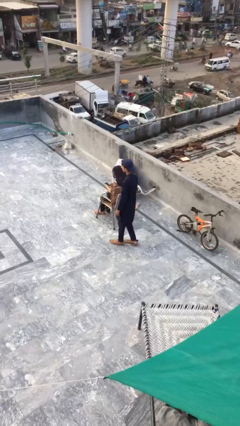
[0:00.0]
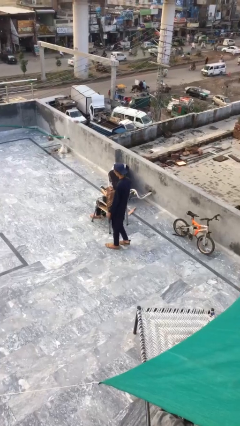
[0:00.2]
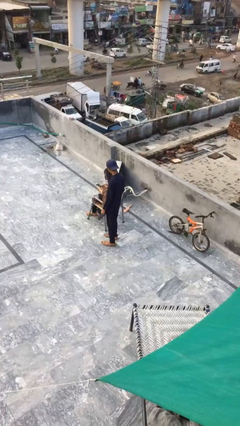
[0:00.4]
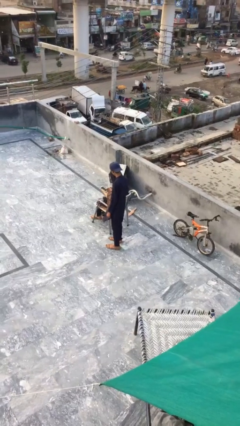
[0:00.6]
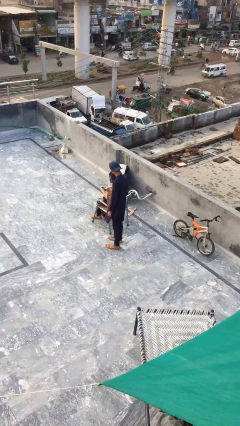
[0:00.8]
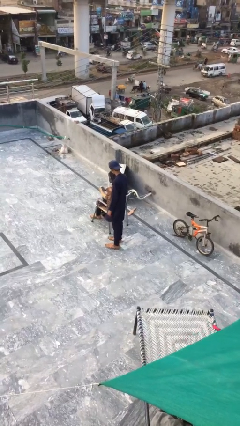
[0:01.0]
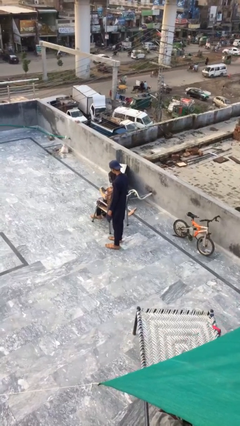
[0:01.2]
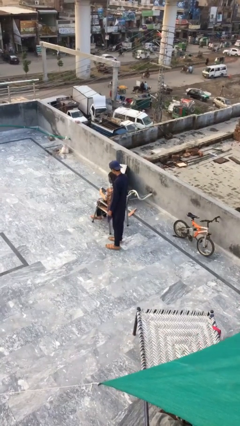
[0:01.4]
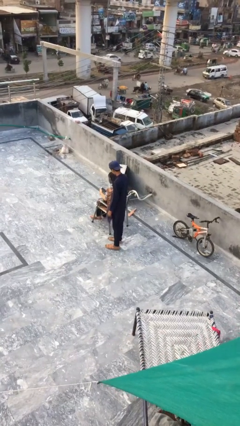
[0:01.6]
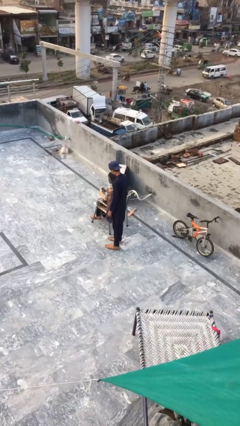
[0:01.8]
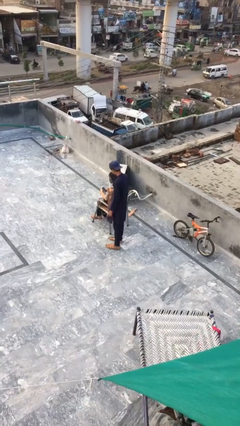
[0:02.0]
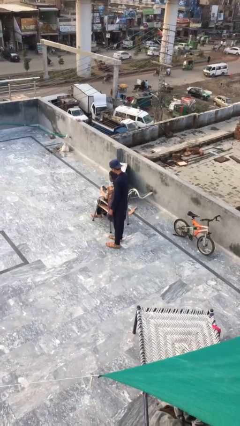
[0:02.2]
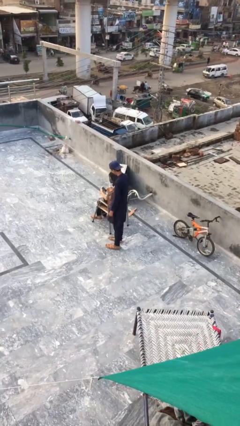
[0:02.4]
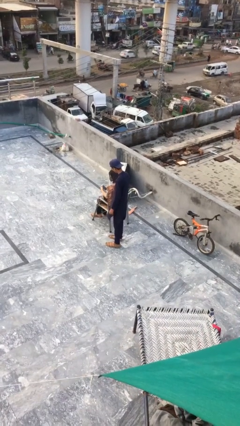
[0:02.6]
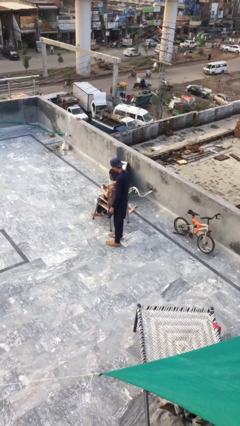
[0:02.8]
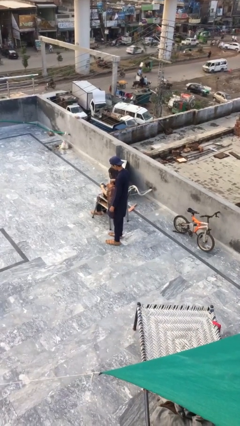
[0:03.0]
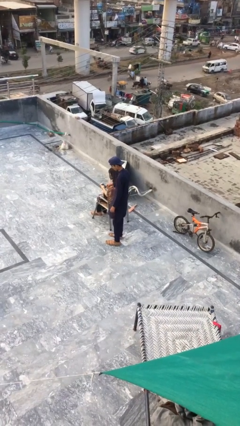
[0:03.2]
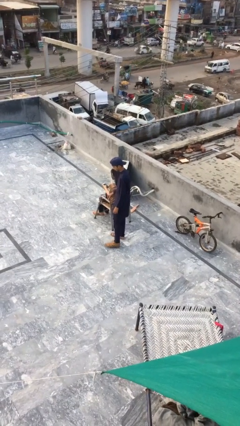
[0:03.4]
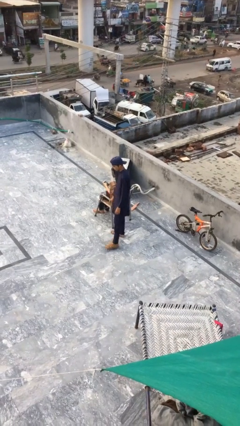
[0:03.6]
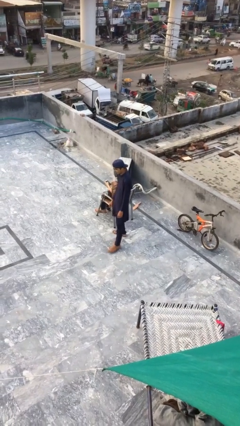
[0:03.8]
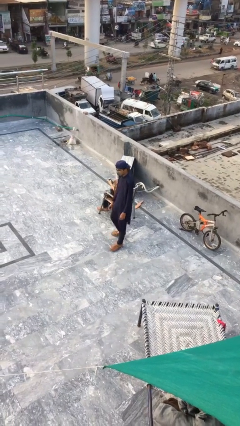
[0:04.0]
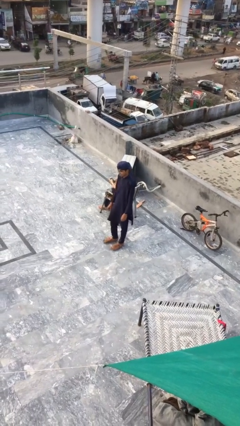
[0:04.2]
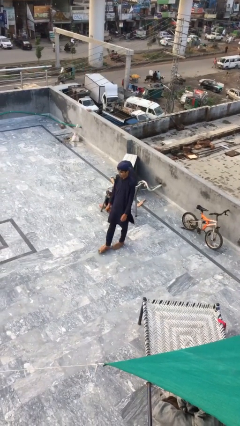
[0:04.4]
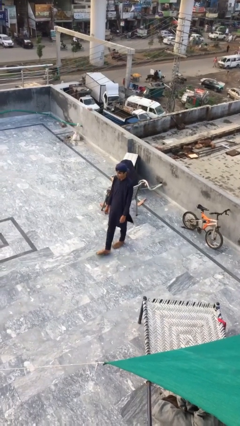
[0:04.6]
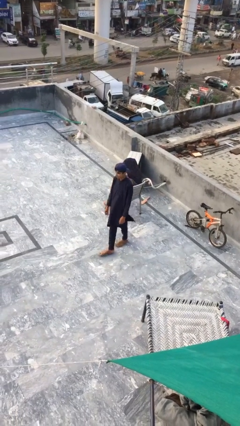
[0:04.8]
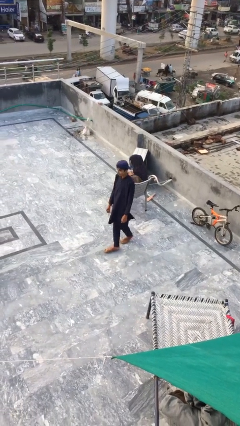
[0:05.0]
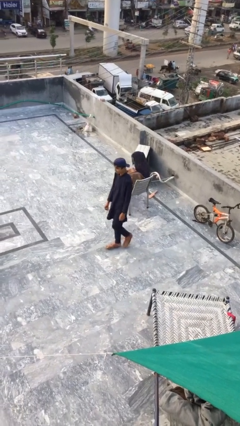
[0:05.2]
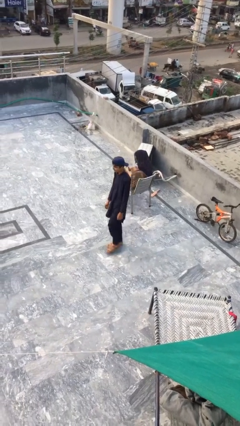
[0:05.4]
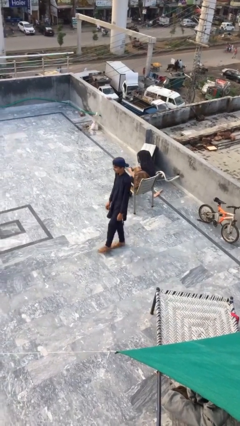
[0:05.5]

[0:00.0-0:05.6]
person steals object from person

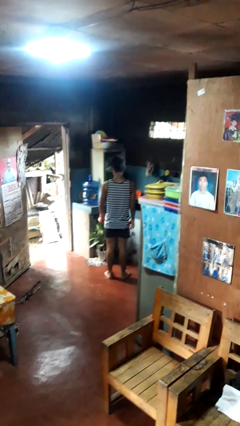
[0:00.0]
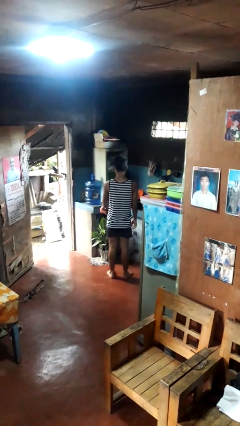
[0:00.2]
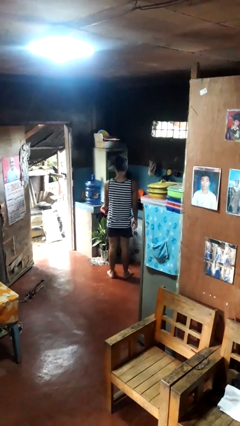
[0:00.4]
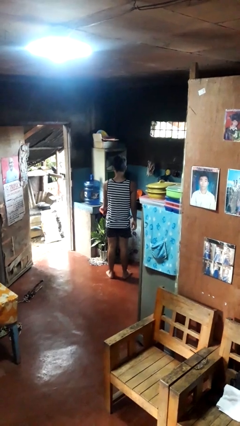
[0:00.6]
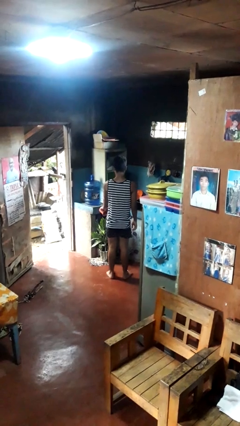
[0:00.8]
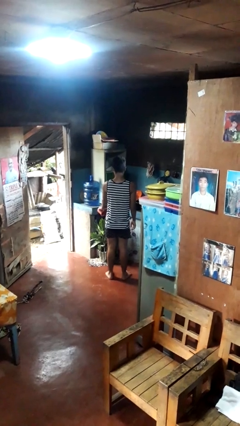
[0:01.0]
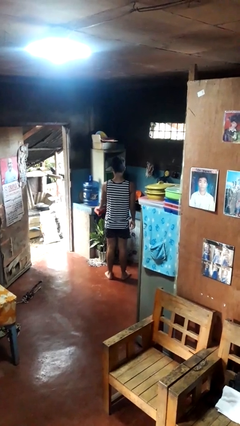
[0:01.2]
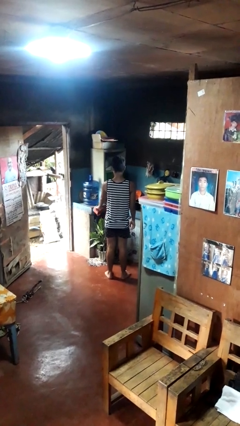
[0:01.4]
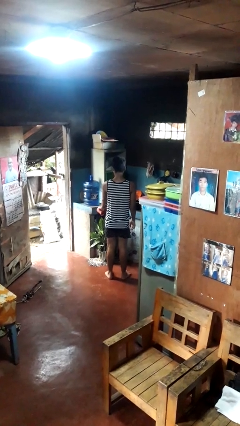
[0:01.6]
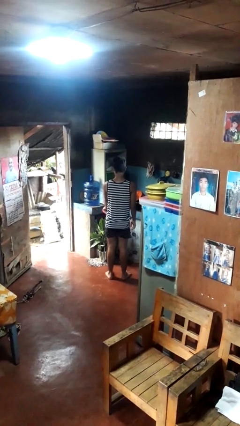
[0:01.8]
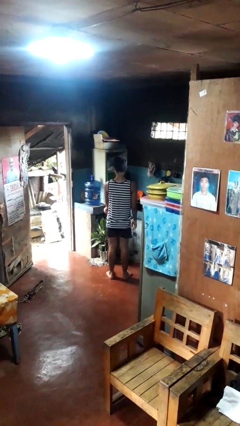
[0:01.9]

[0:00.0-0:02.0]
person waters houseplant

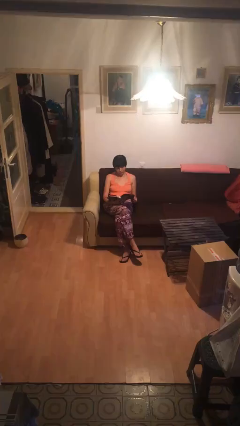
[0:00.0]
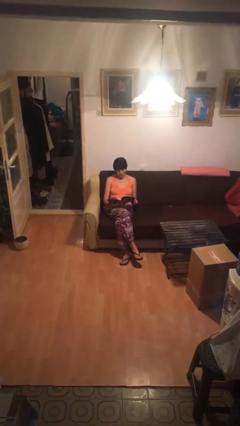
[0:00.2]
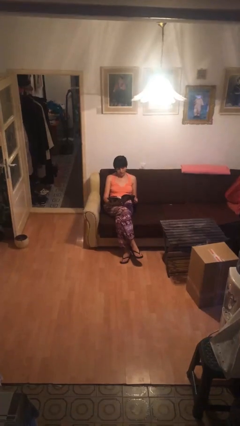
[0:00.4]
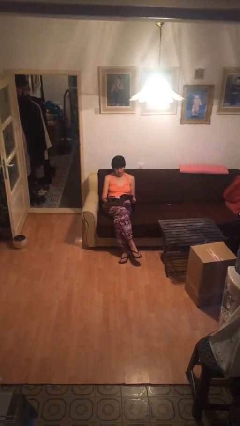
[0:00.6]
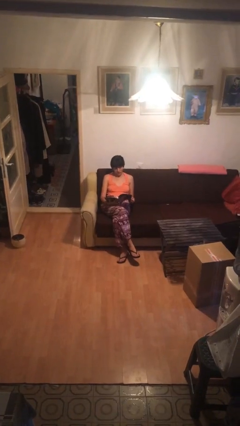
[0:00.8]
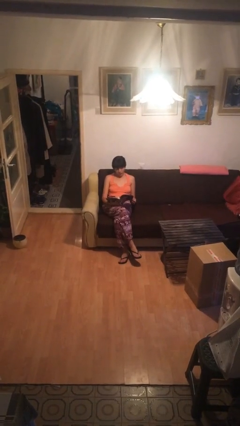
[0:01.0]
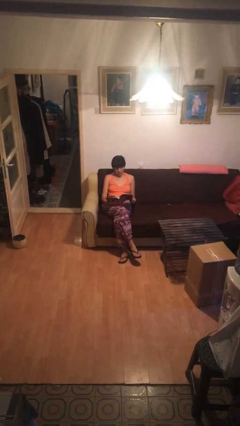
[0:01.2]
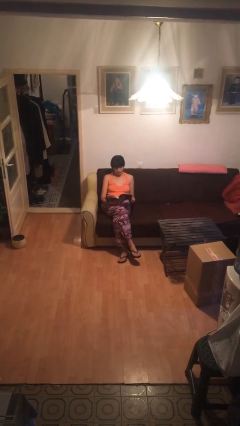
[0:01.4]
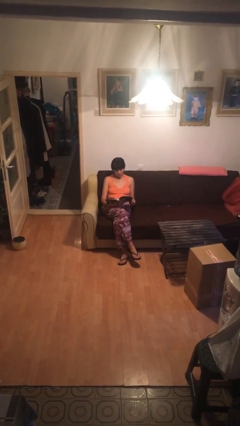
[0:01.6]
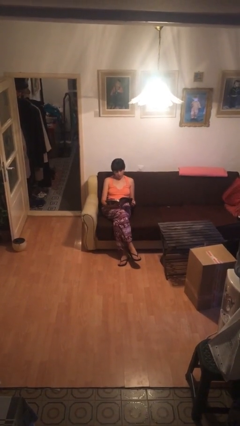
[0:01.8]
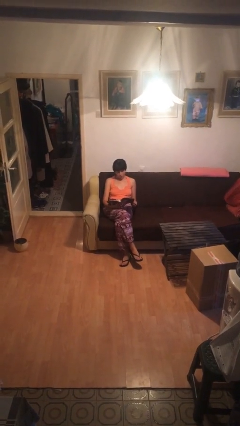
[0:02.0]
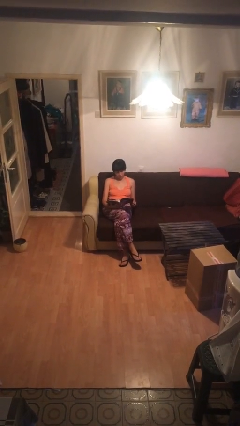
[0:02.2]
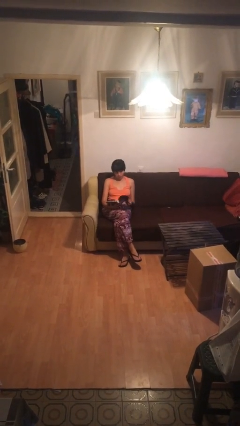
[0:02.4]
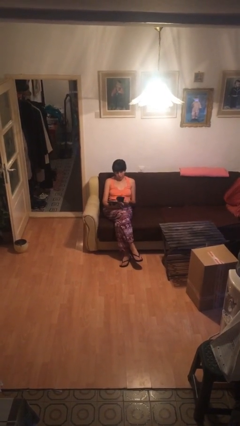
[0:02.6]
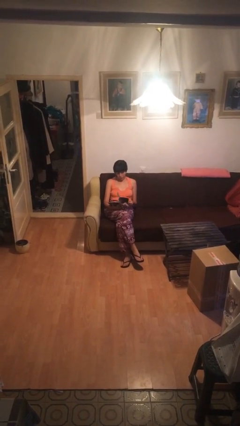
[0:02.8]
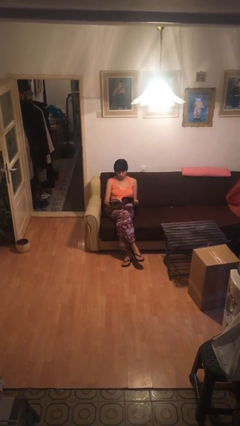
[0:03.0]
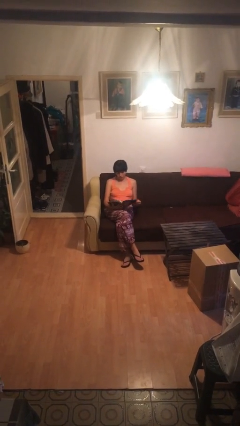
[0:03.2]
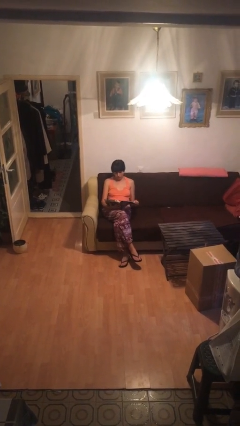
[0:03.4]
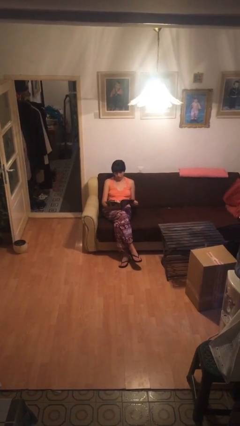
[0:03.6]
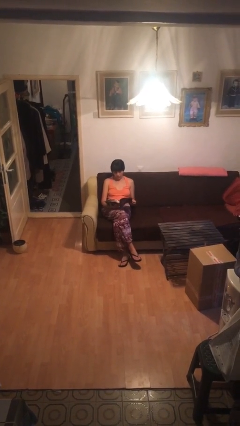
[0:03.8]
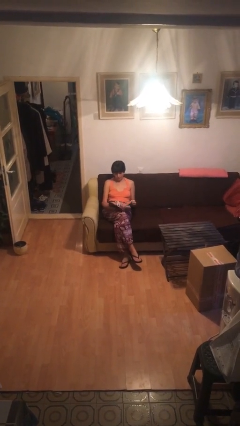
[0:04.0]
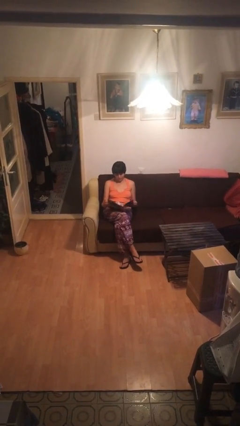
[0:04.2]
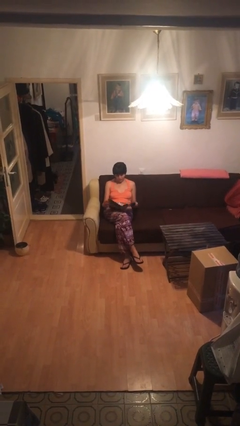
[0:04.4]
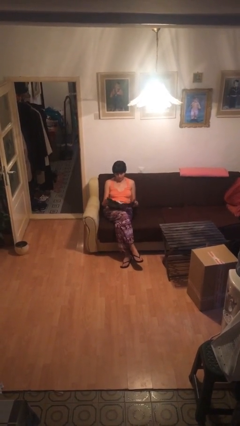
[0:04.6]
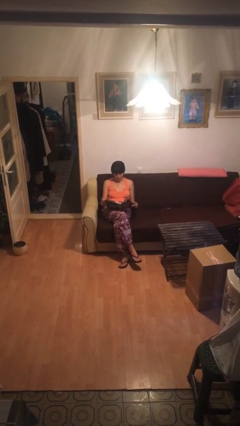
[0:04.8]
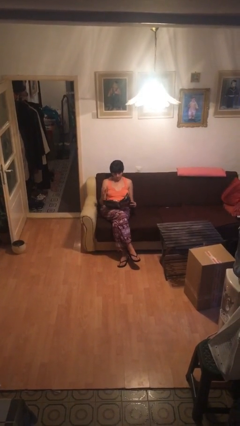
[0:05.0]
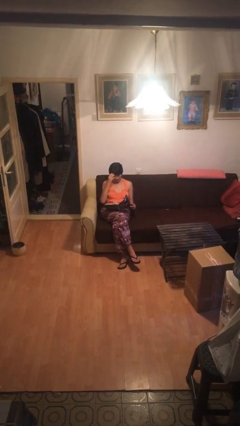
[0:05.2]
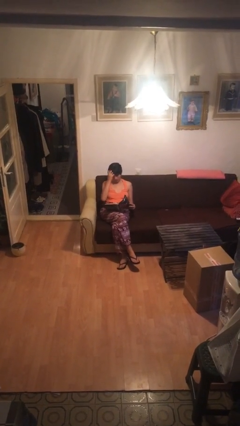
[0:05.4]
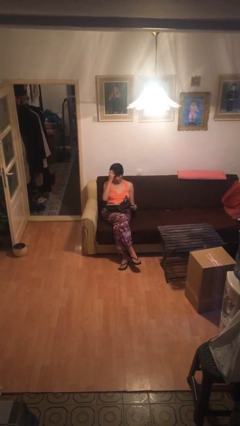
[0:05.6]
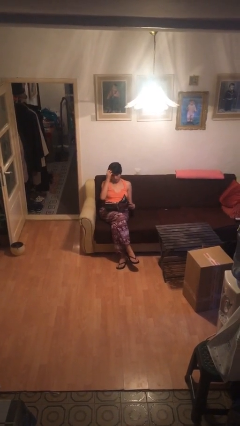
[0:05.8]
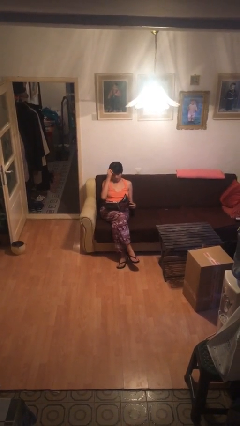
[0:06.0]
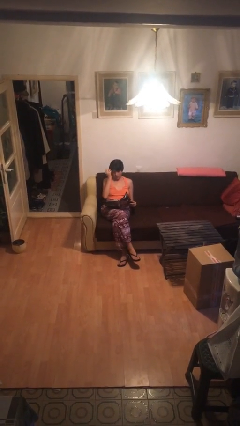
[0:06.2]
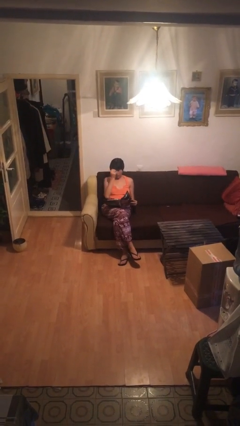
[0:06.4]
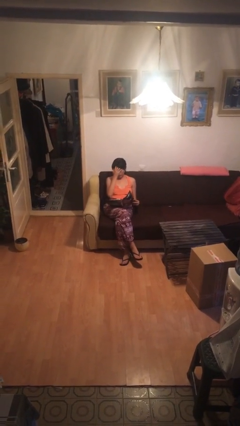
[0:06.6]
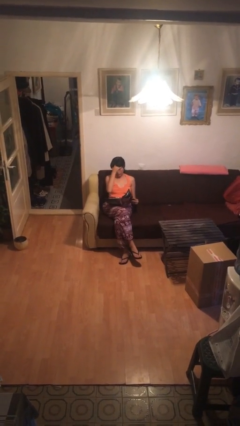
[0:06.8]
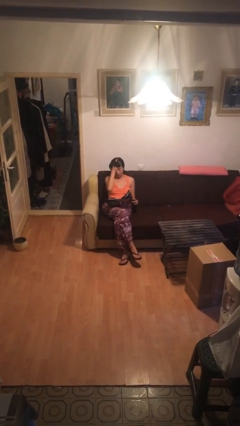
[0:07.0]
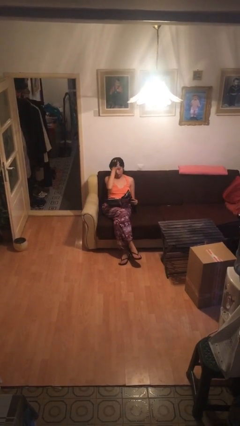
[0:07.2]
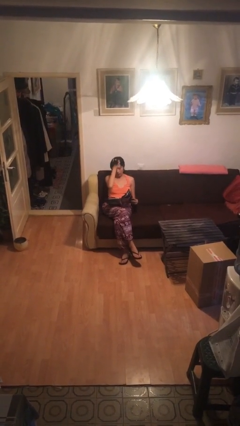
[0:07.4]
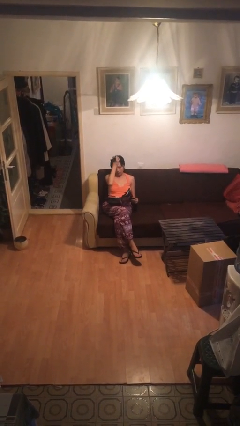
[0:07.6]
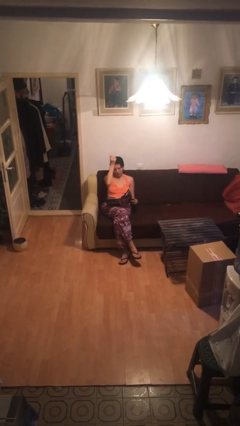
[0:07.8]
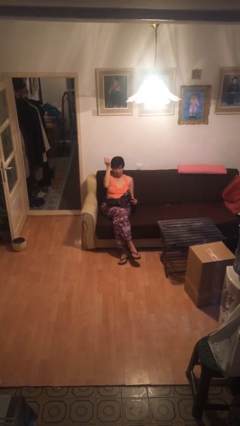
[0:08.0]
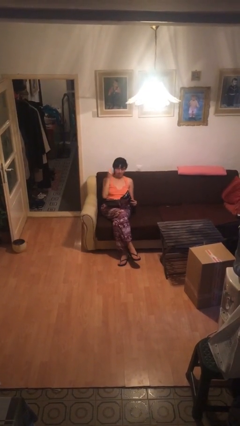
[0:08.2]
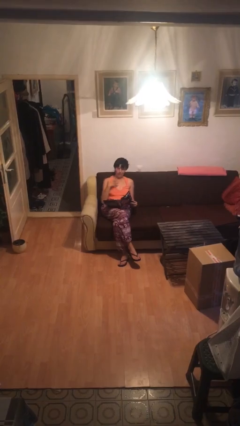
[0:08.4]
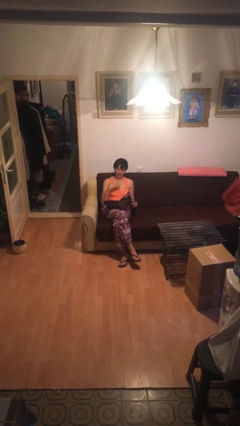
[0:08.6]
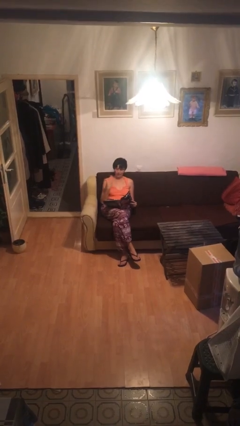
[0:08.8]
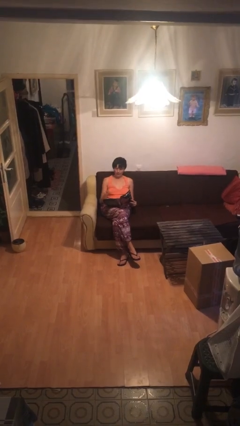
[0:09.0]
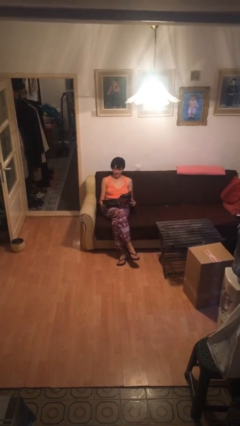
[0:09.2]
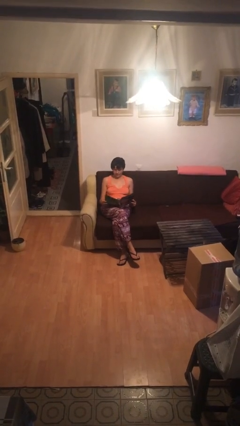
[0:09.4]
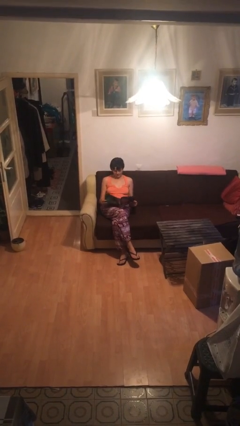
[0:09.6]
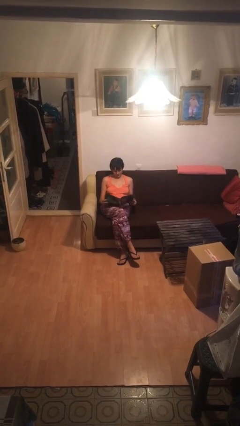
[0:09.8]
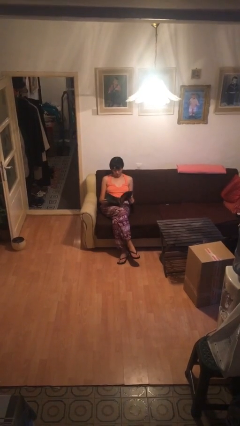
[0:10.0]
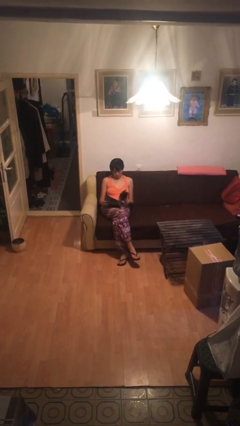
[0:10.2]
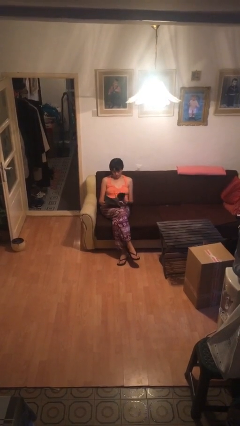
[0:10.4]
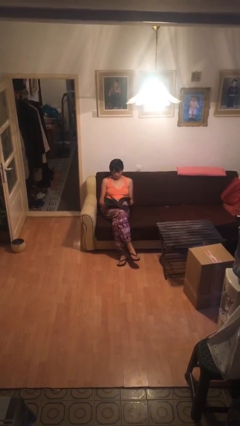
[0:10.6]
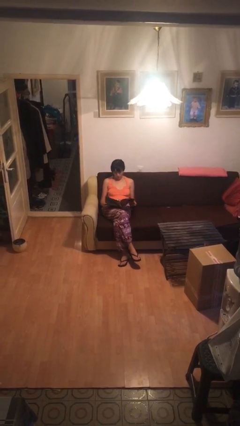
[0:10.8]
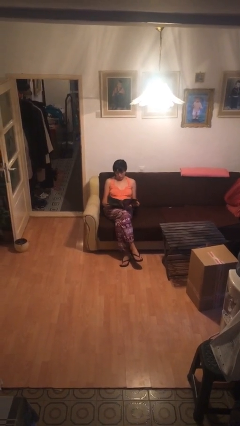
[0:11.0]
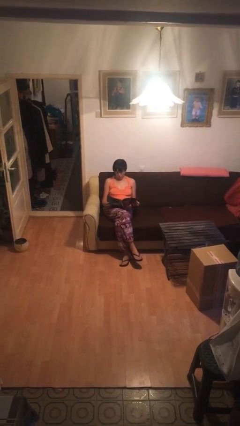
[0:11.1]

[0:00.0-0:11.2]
person reads document
